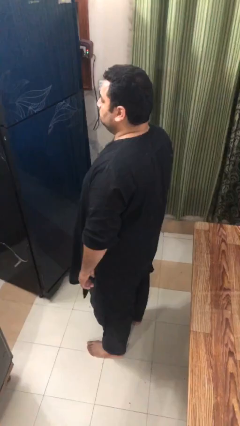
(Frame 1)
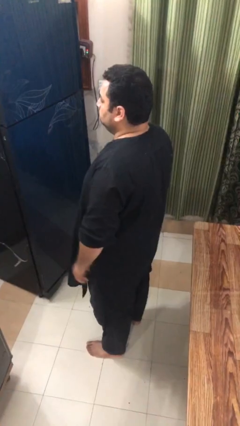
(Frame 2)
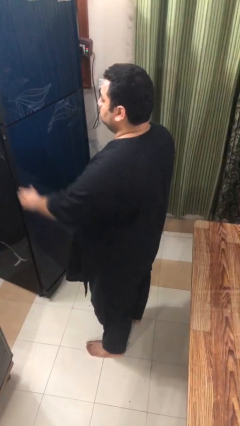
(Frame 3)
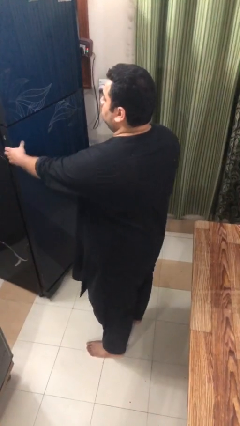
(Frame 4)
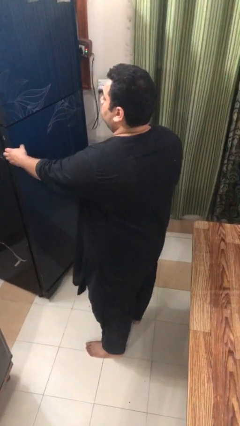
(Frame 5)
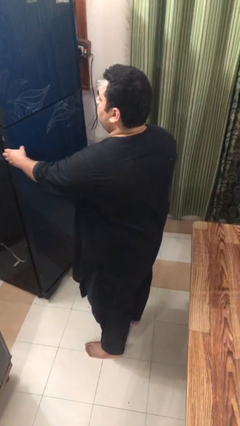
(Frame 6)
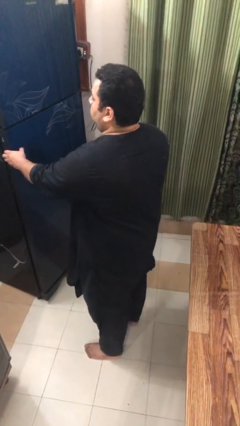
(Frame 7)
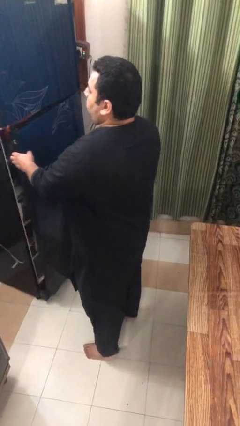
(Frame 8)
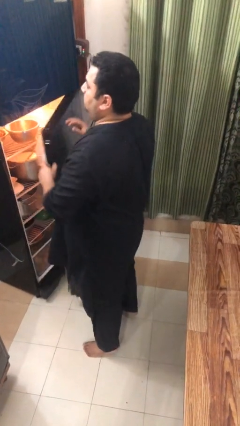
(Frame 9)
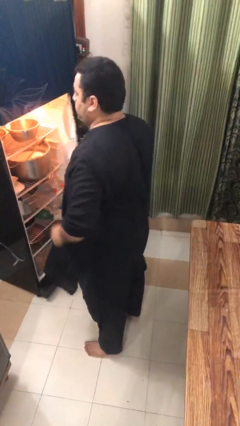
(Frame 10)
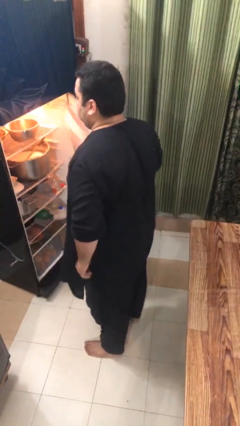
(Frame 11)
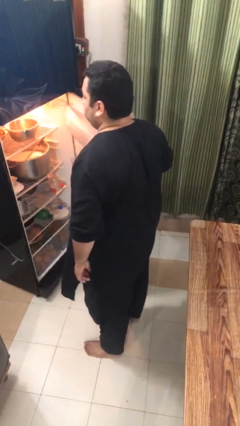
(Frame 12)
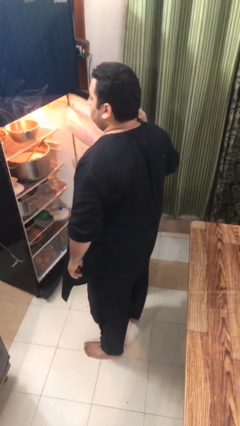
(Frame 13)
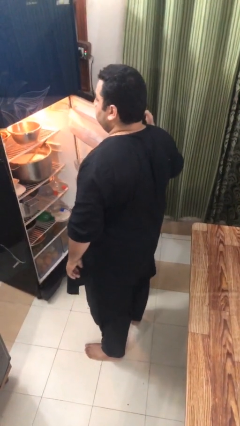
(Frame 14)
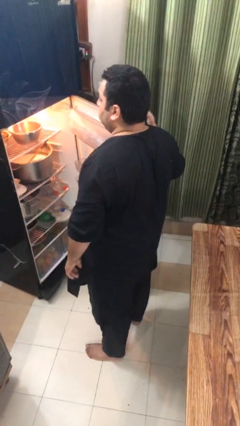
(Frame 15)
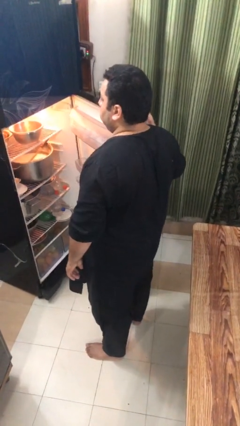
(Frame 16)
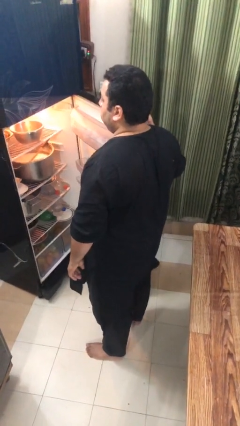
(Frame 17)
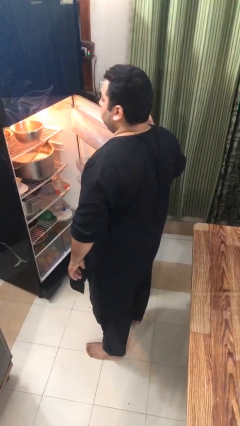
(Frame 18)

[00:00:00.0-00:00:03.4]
person opens refrigerator

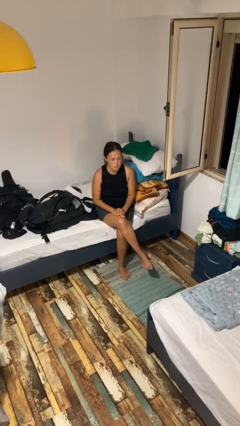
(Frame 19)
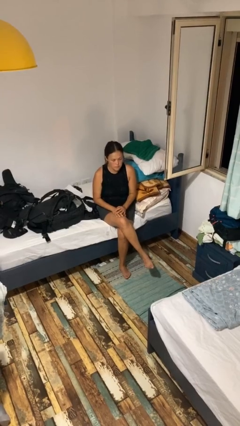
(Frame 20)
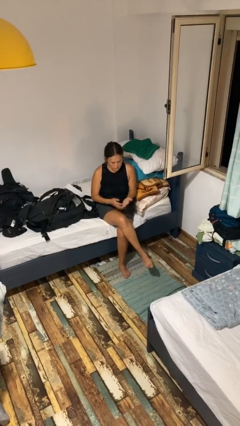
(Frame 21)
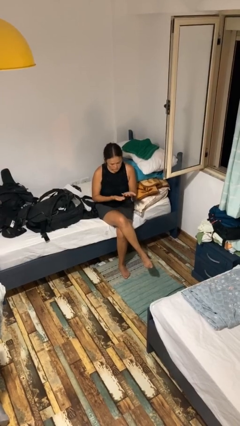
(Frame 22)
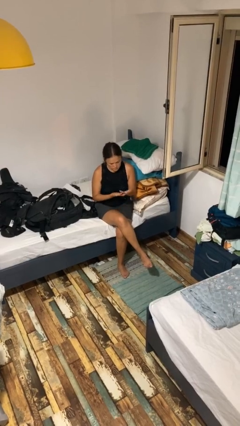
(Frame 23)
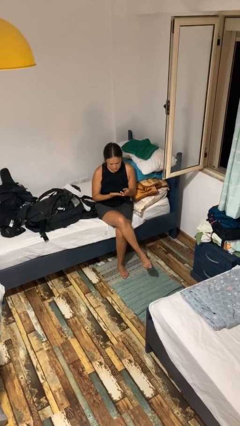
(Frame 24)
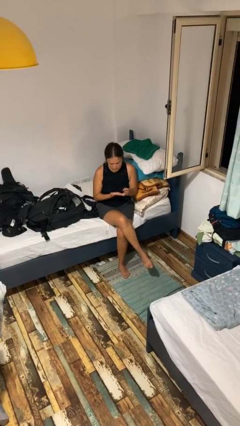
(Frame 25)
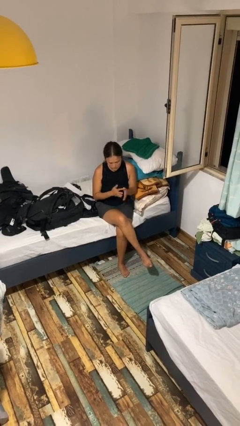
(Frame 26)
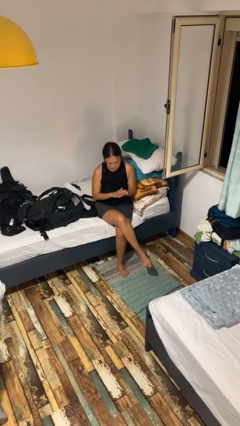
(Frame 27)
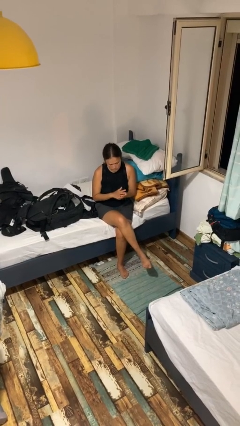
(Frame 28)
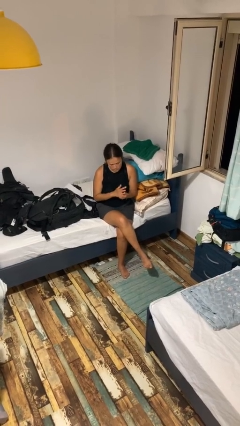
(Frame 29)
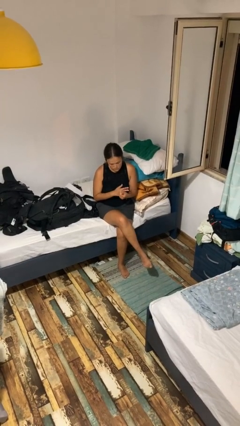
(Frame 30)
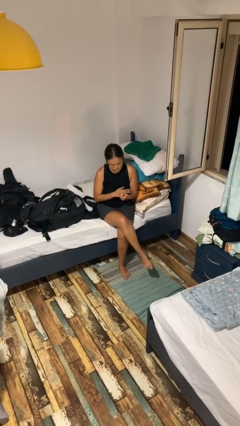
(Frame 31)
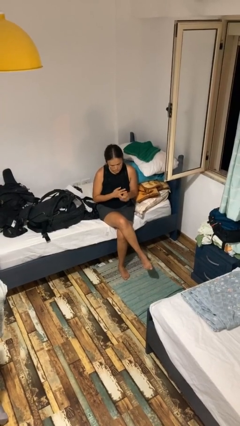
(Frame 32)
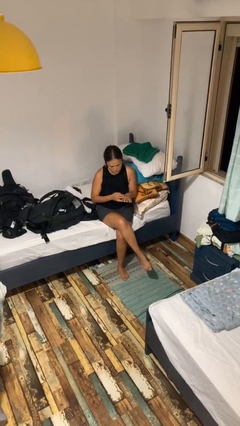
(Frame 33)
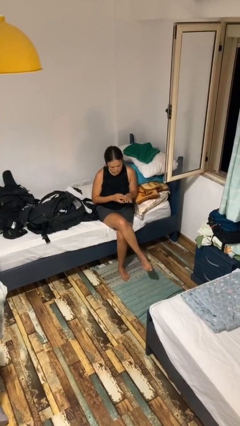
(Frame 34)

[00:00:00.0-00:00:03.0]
person looks at hands in lap

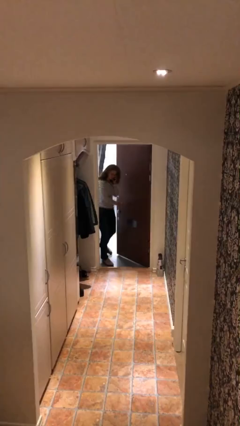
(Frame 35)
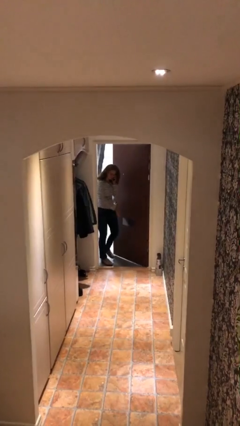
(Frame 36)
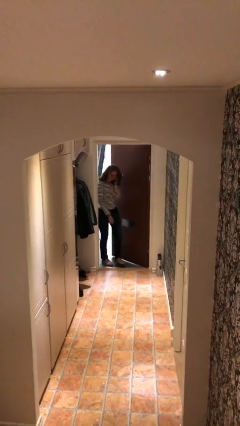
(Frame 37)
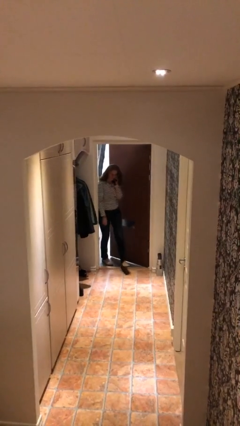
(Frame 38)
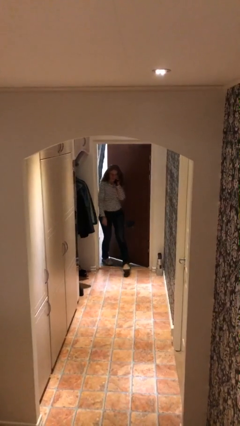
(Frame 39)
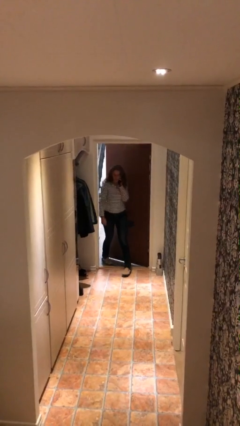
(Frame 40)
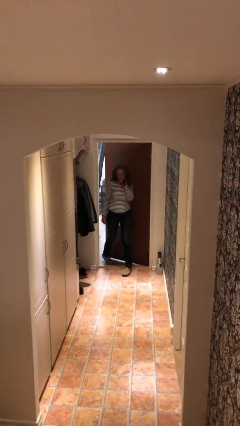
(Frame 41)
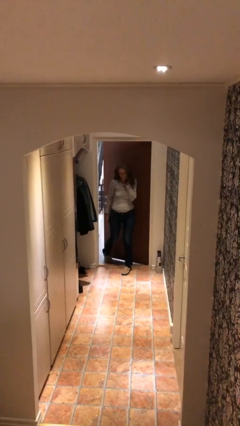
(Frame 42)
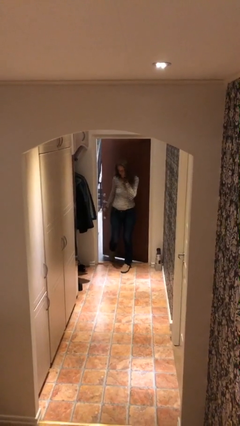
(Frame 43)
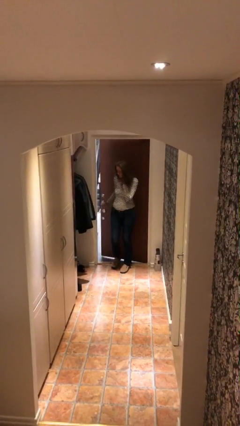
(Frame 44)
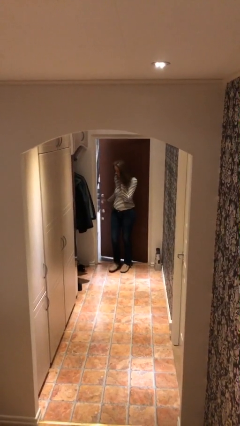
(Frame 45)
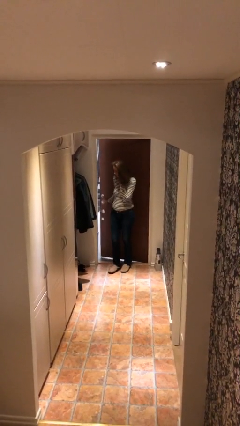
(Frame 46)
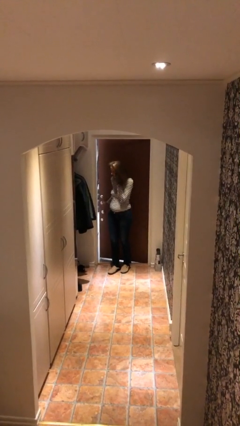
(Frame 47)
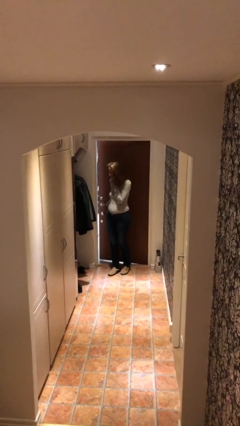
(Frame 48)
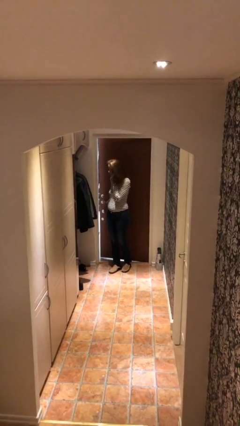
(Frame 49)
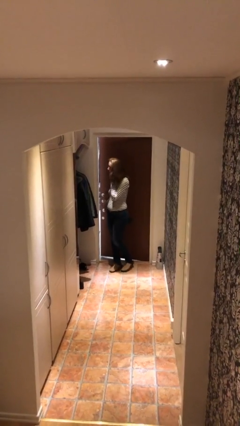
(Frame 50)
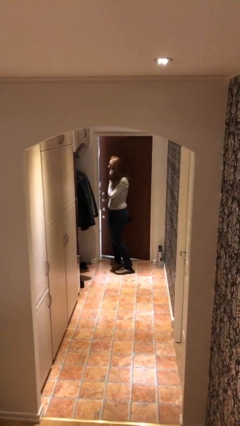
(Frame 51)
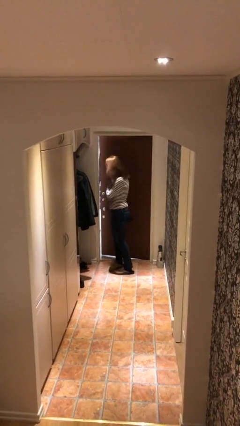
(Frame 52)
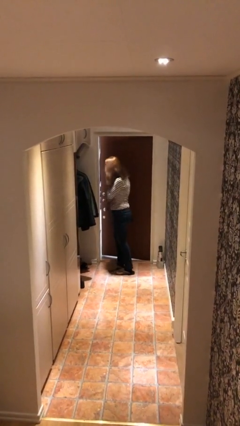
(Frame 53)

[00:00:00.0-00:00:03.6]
person enters scene through structure

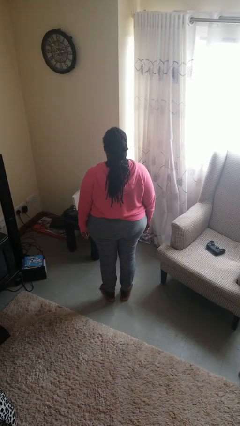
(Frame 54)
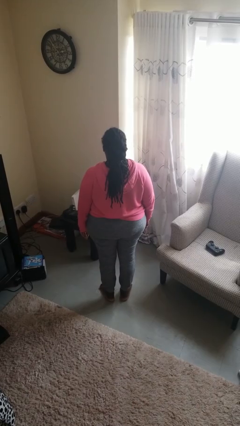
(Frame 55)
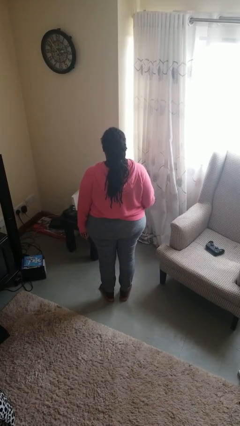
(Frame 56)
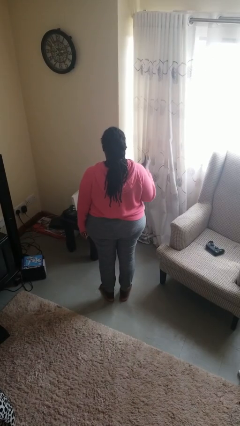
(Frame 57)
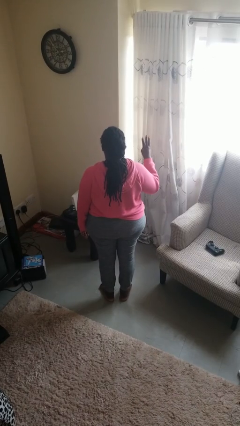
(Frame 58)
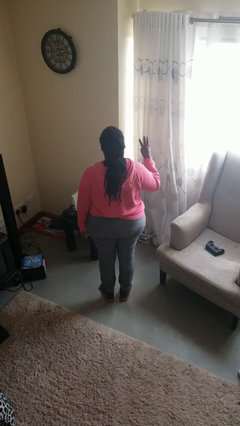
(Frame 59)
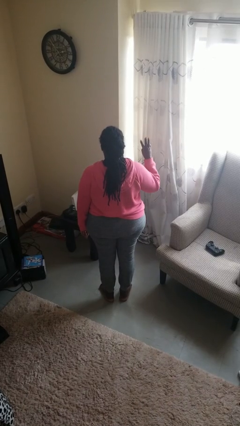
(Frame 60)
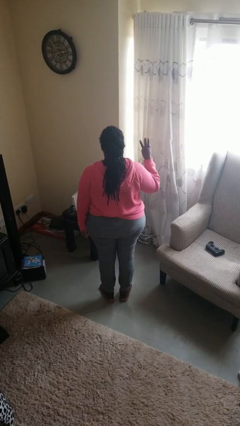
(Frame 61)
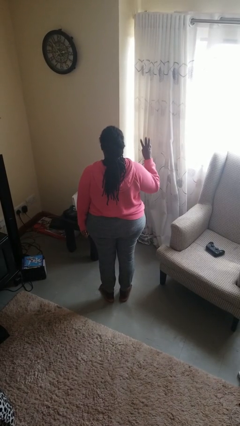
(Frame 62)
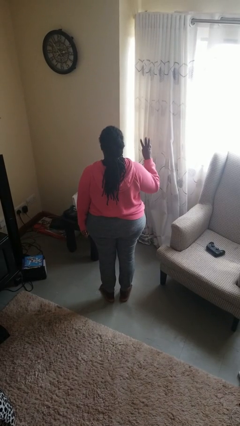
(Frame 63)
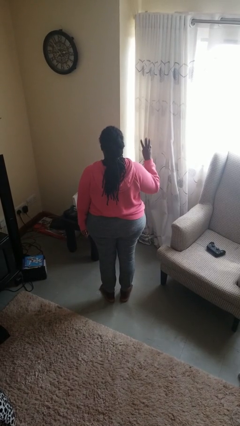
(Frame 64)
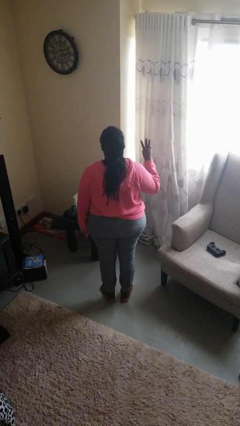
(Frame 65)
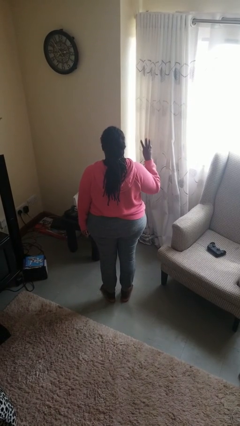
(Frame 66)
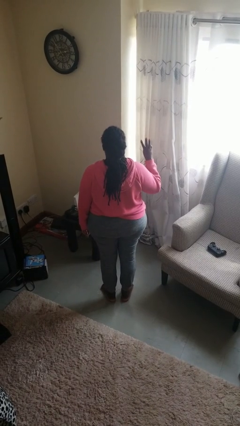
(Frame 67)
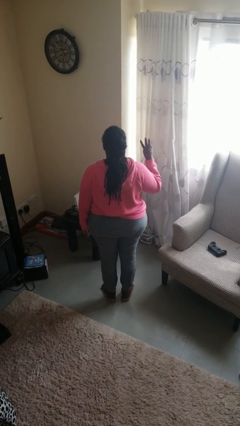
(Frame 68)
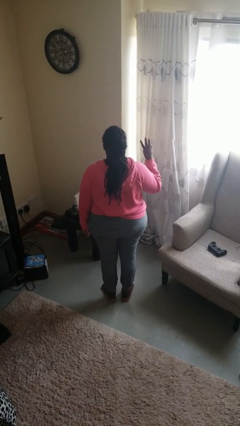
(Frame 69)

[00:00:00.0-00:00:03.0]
person gestures number three

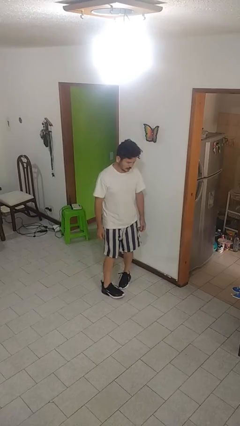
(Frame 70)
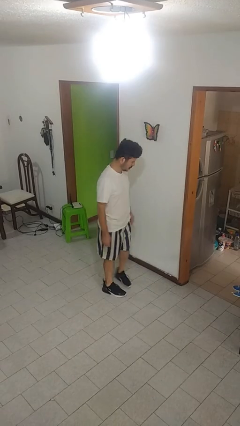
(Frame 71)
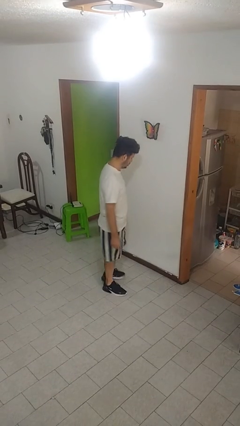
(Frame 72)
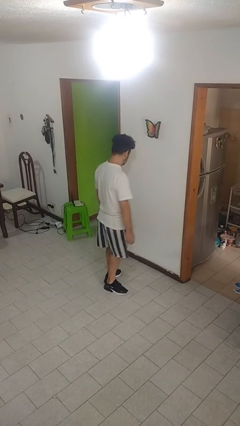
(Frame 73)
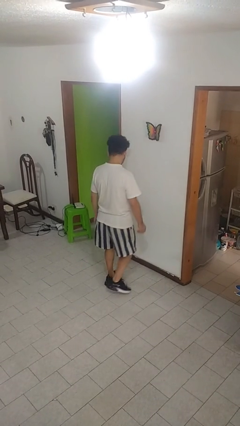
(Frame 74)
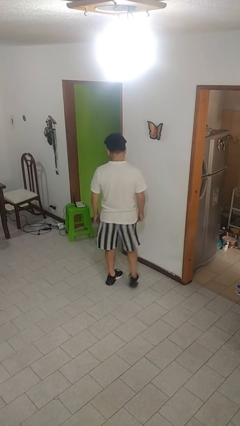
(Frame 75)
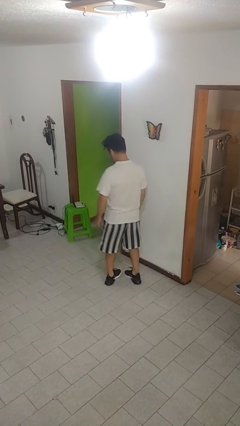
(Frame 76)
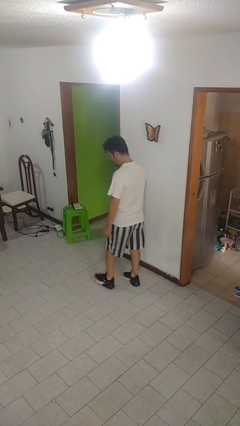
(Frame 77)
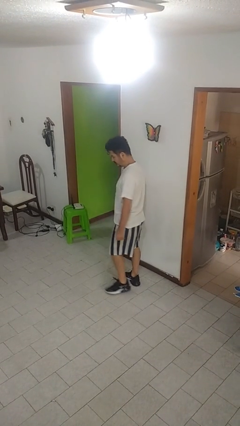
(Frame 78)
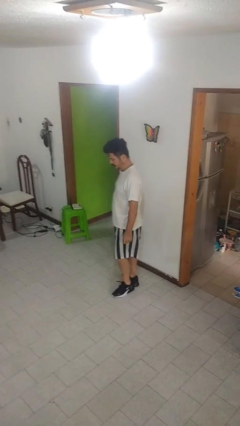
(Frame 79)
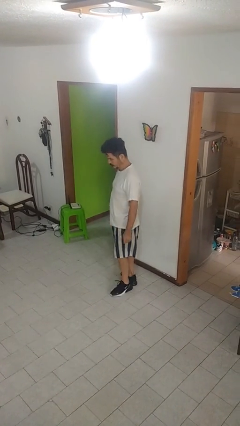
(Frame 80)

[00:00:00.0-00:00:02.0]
person twirls

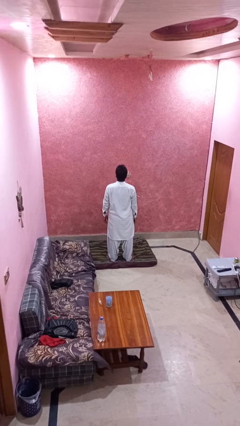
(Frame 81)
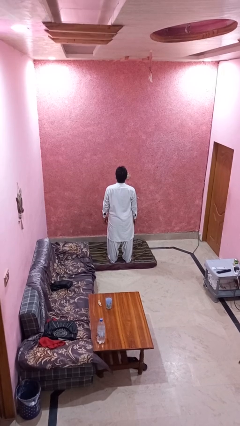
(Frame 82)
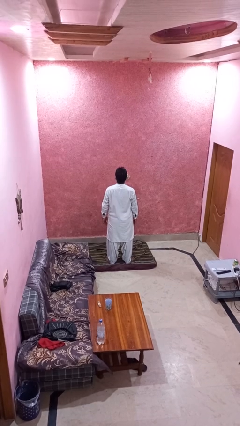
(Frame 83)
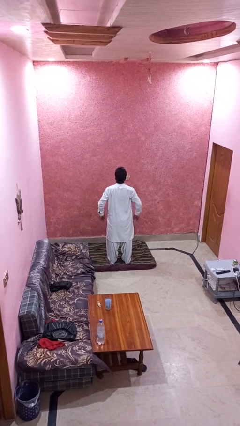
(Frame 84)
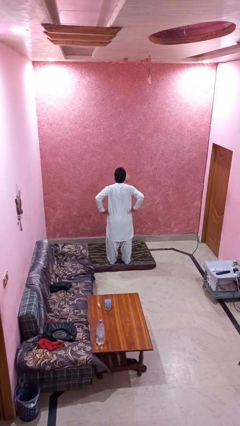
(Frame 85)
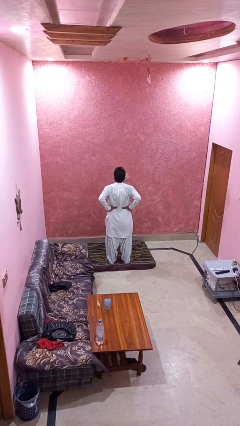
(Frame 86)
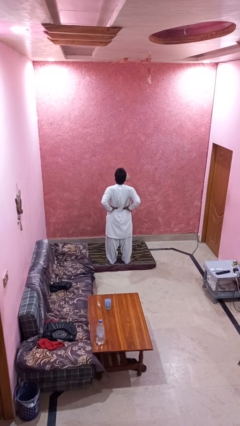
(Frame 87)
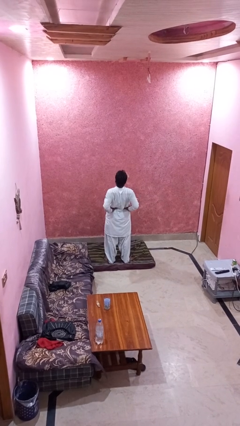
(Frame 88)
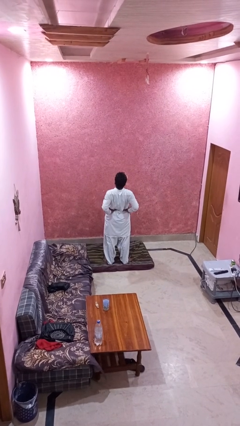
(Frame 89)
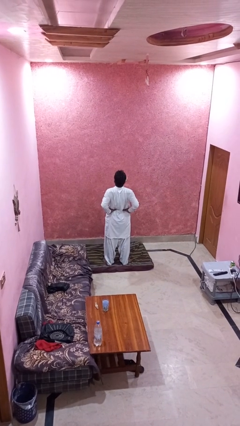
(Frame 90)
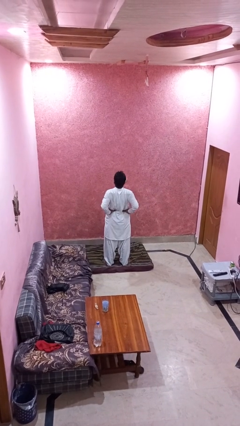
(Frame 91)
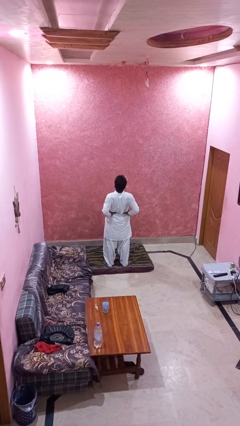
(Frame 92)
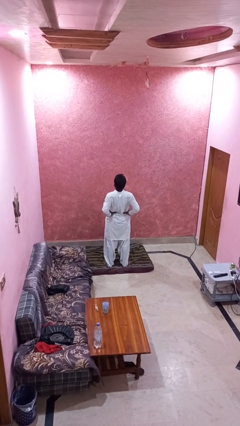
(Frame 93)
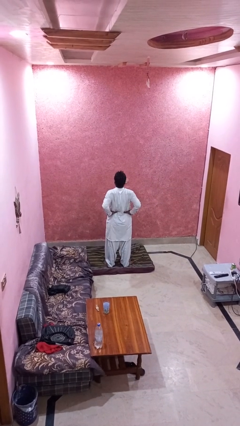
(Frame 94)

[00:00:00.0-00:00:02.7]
person stretches back
